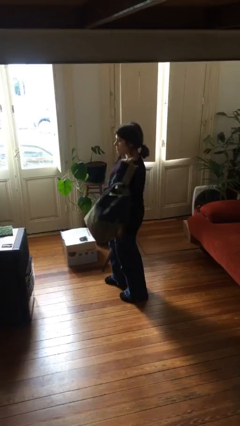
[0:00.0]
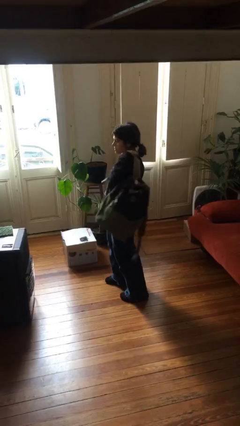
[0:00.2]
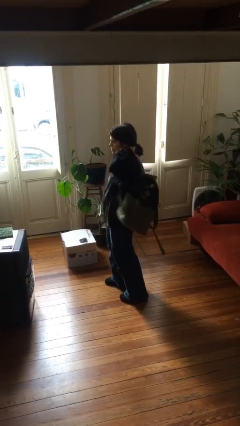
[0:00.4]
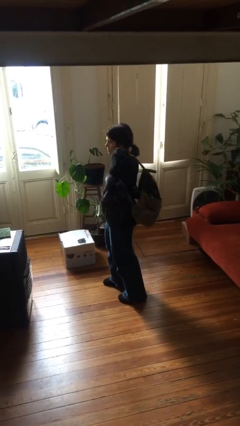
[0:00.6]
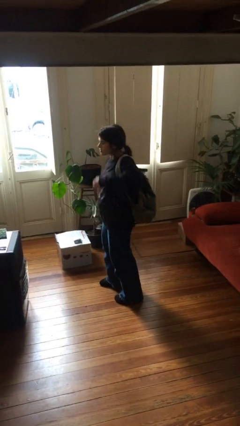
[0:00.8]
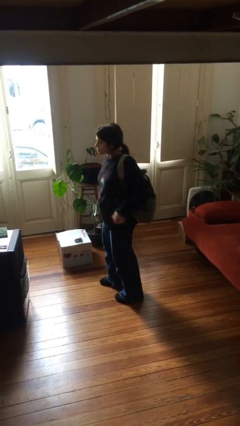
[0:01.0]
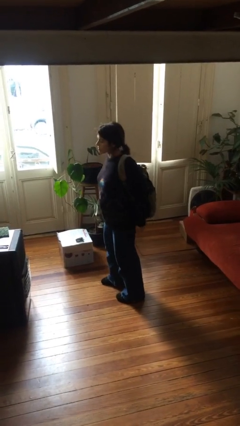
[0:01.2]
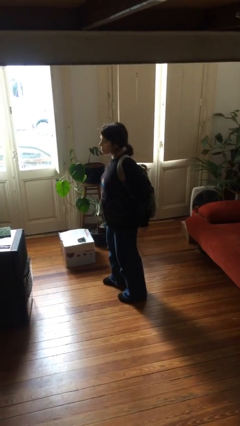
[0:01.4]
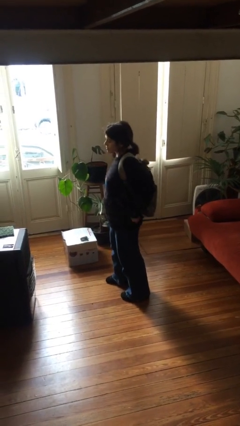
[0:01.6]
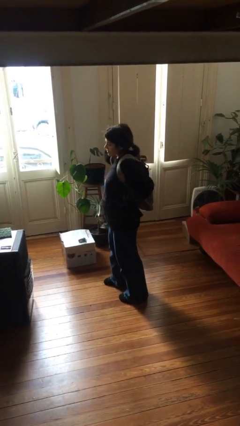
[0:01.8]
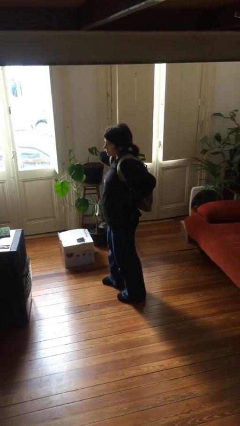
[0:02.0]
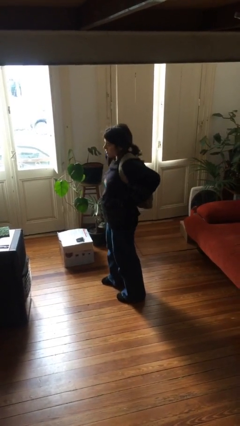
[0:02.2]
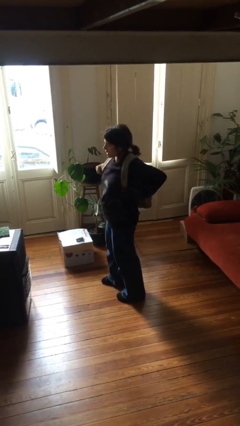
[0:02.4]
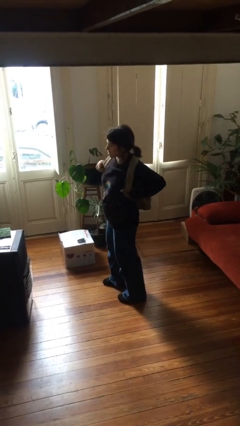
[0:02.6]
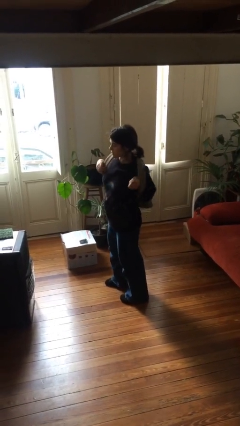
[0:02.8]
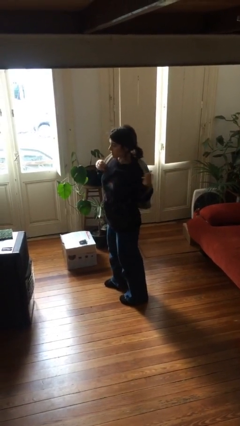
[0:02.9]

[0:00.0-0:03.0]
person puts on backpack

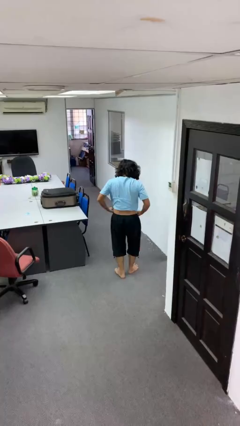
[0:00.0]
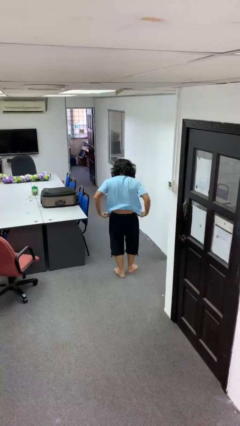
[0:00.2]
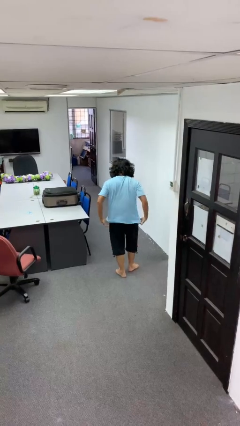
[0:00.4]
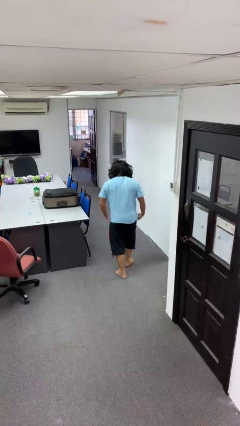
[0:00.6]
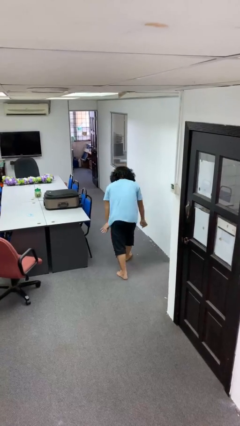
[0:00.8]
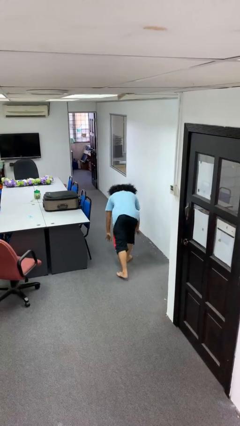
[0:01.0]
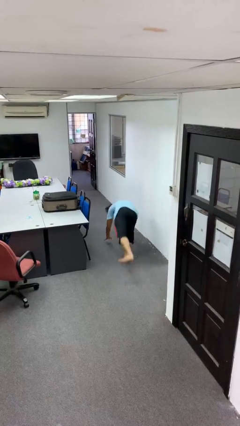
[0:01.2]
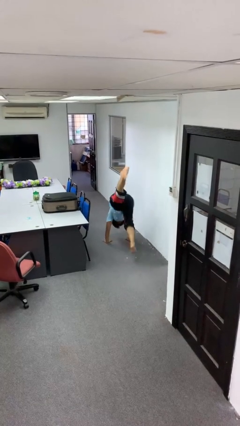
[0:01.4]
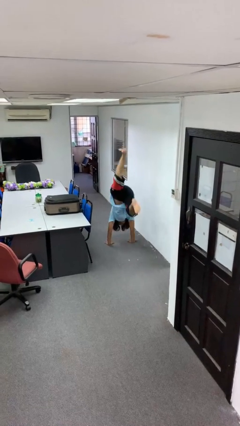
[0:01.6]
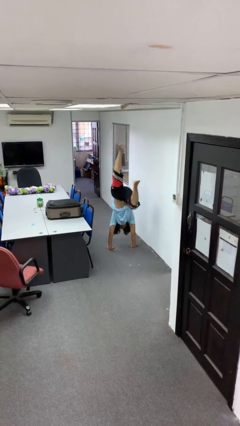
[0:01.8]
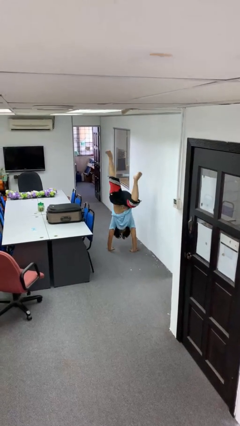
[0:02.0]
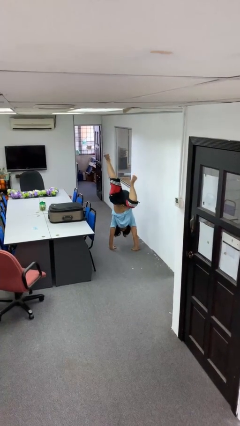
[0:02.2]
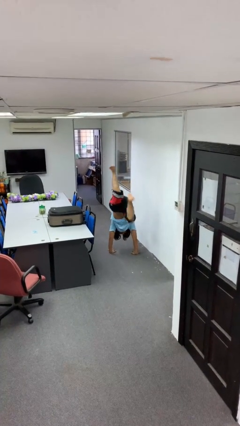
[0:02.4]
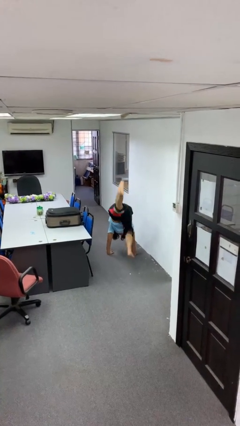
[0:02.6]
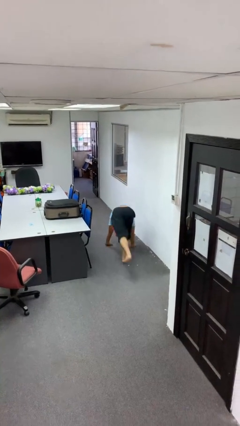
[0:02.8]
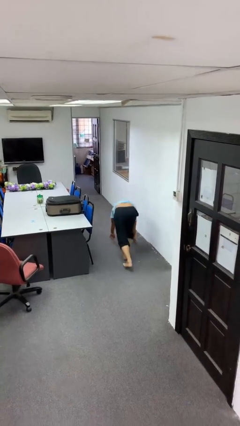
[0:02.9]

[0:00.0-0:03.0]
person handstand

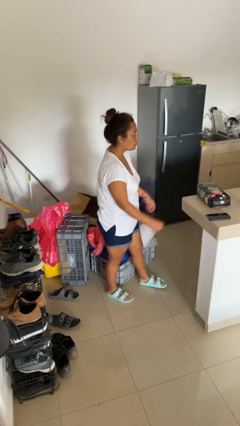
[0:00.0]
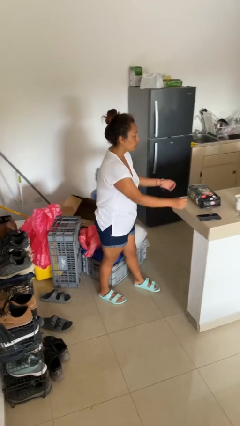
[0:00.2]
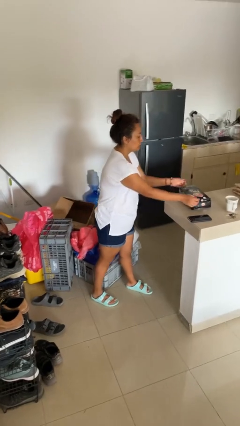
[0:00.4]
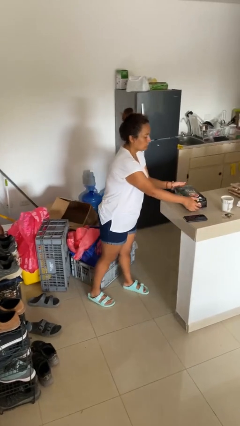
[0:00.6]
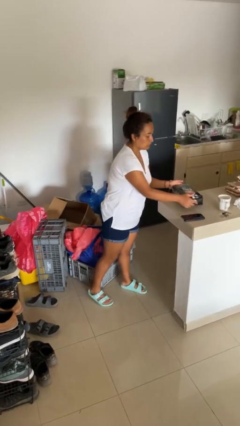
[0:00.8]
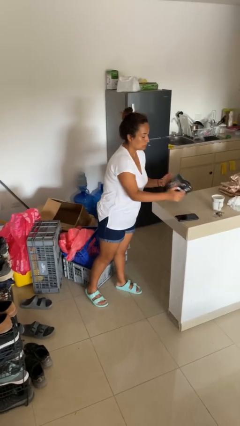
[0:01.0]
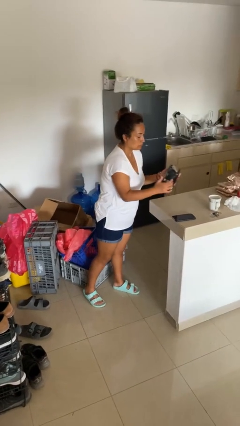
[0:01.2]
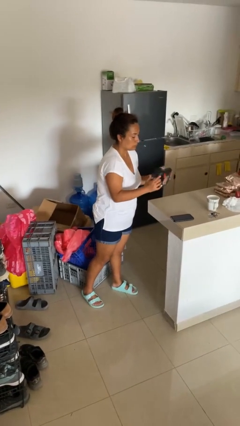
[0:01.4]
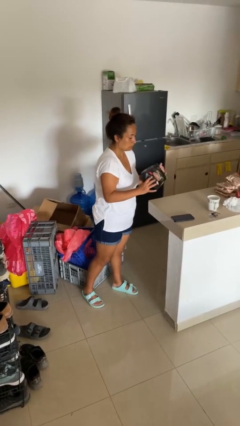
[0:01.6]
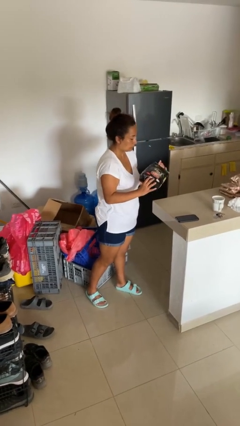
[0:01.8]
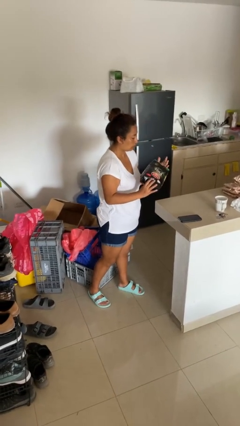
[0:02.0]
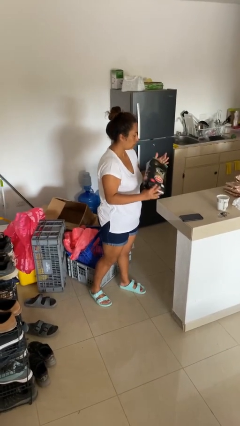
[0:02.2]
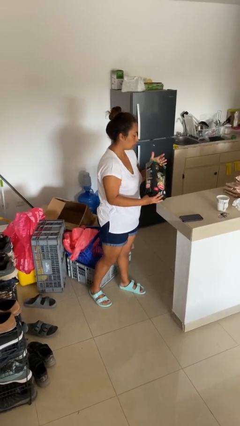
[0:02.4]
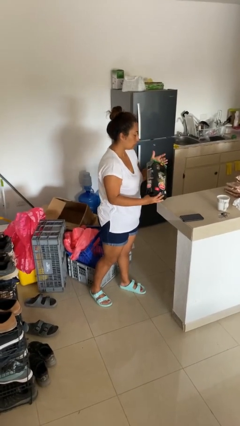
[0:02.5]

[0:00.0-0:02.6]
person picks up object from countertop

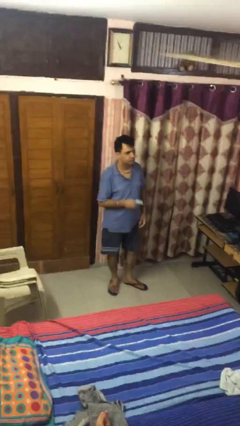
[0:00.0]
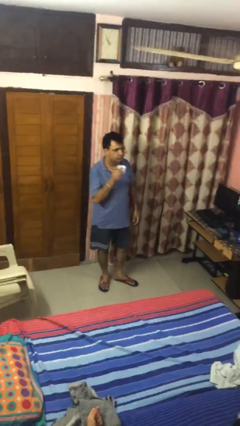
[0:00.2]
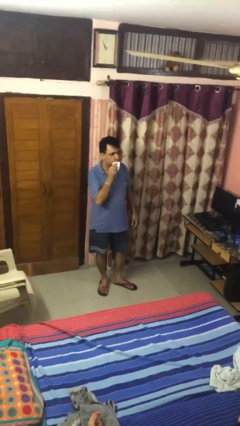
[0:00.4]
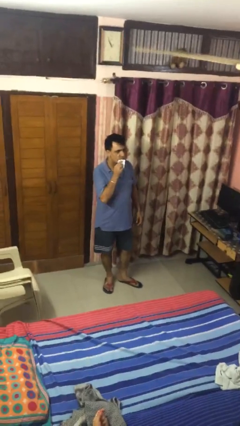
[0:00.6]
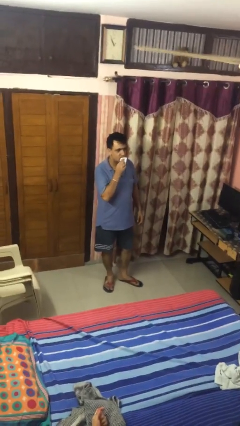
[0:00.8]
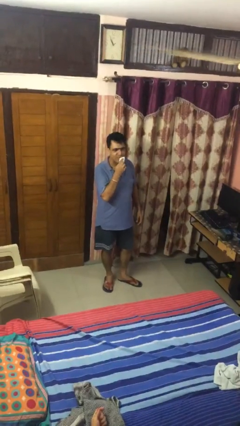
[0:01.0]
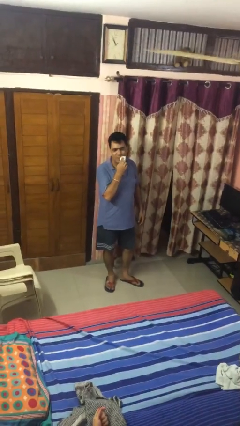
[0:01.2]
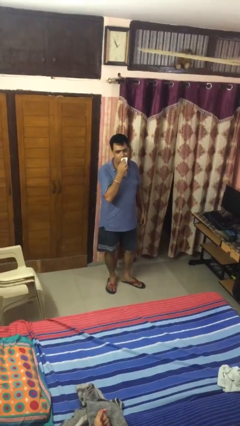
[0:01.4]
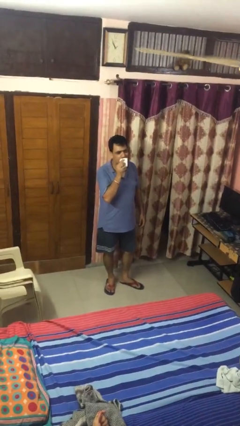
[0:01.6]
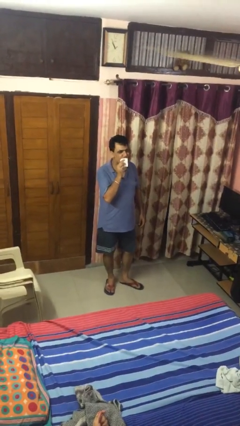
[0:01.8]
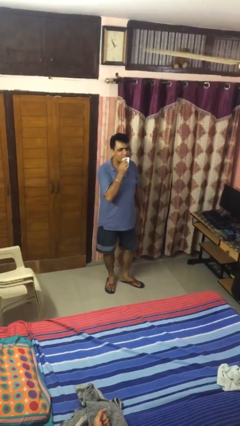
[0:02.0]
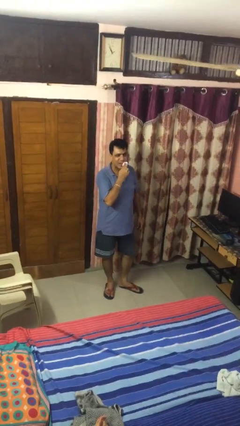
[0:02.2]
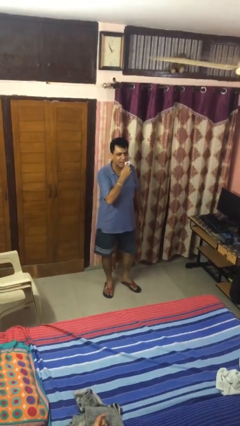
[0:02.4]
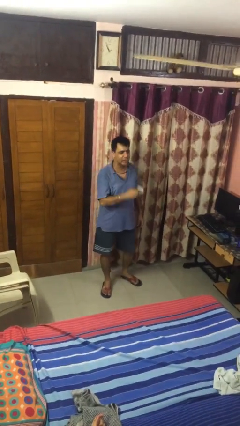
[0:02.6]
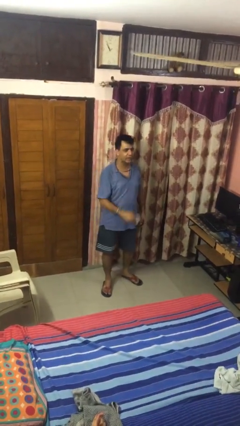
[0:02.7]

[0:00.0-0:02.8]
person wipes mouth with napkin

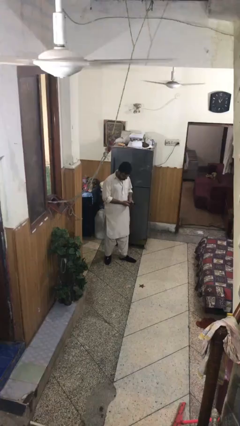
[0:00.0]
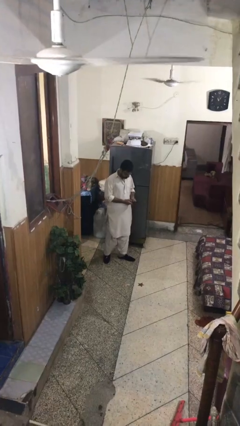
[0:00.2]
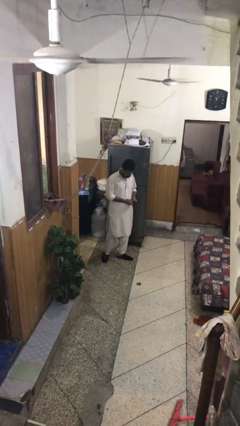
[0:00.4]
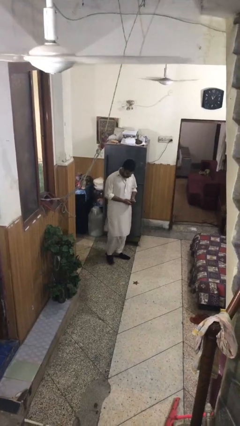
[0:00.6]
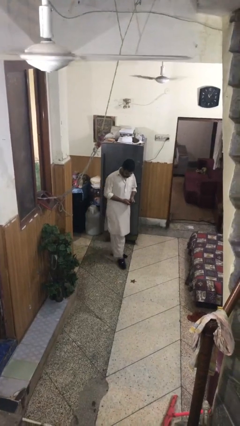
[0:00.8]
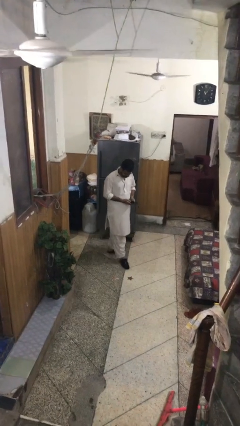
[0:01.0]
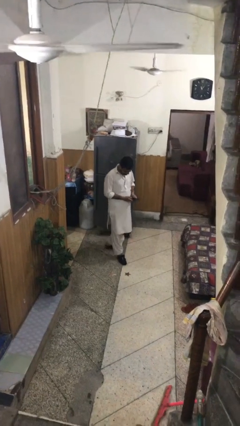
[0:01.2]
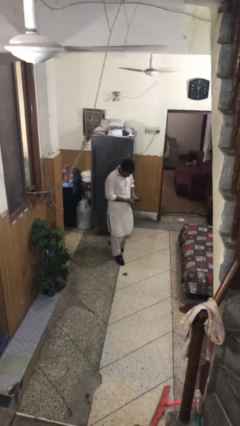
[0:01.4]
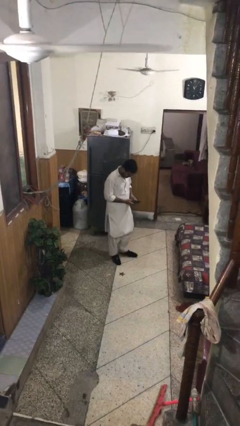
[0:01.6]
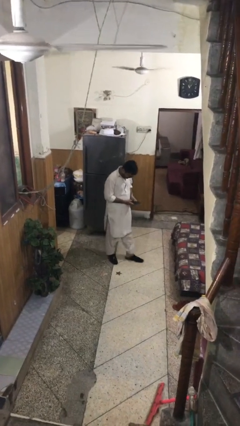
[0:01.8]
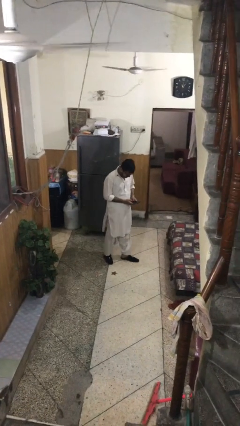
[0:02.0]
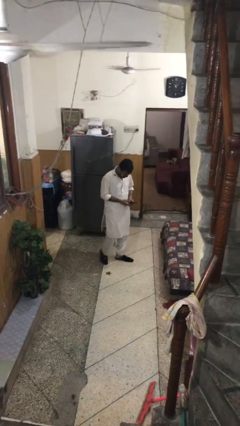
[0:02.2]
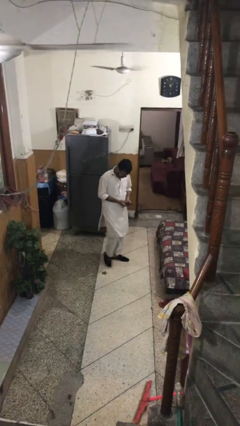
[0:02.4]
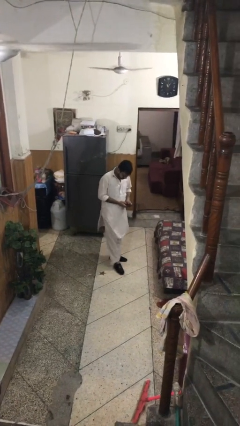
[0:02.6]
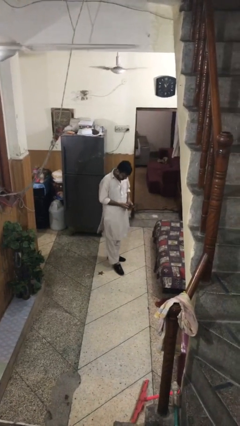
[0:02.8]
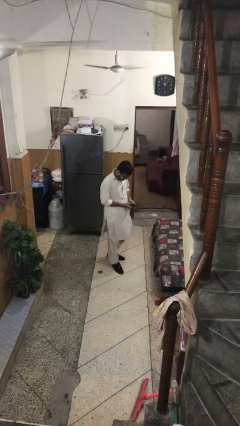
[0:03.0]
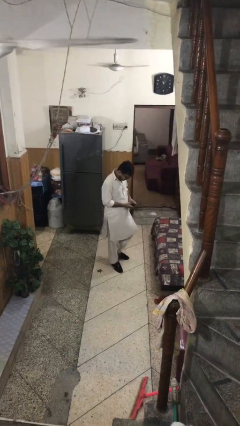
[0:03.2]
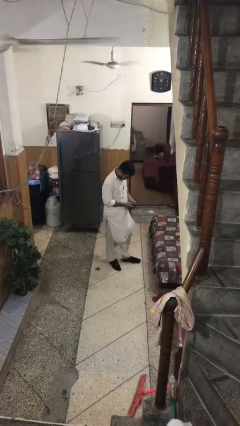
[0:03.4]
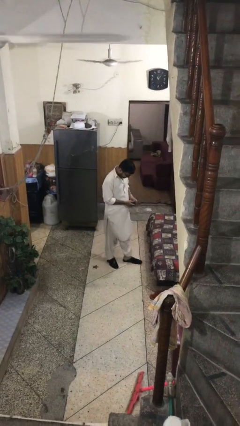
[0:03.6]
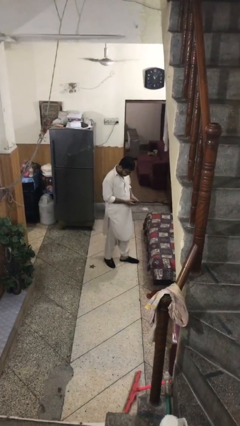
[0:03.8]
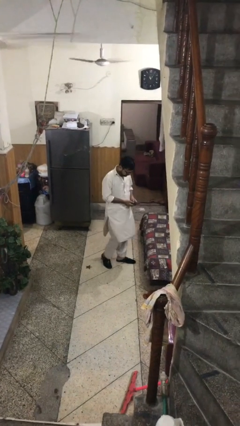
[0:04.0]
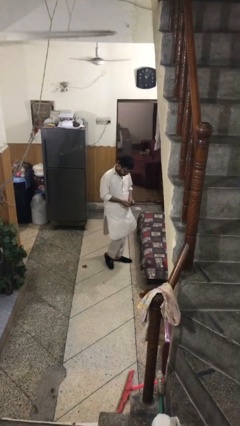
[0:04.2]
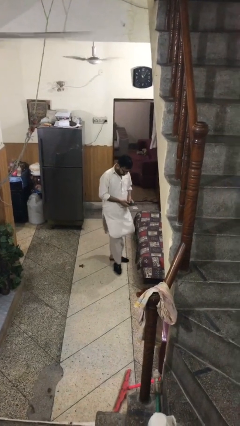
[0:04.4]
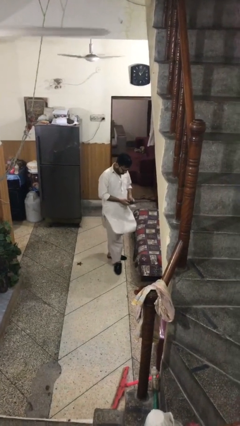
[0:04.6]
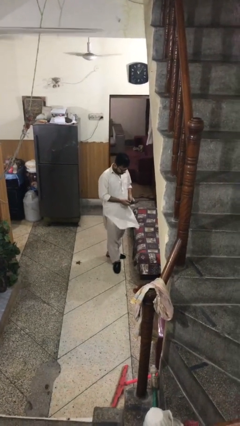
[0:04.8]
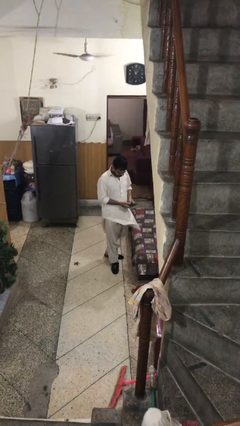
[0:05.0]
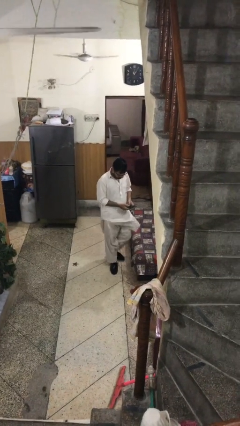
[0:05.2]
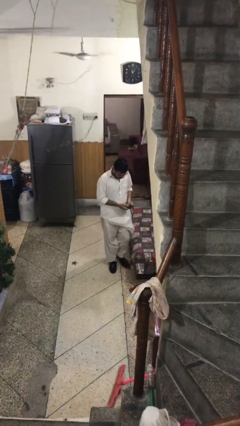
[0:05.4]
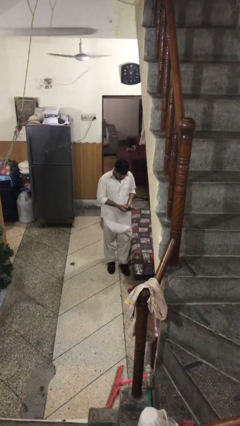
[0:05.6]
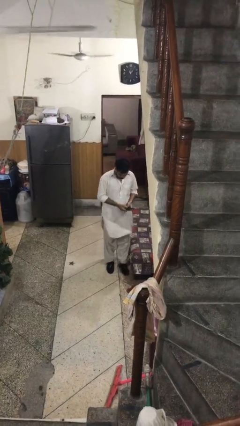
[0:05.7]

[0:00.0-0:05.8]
person texts on phone
